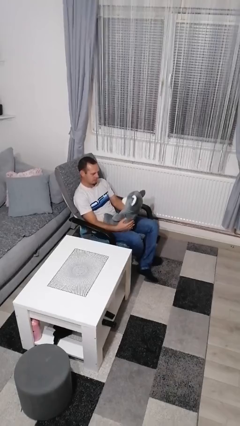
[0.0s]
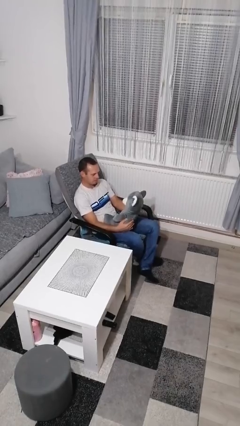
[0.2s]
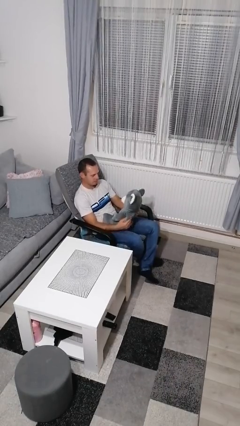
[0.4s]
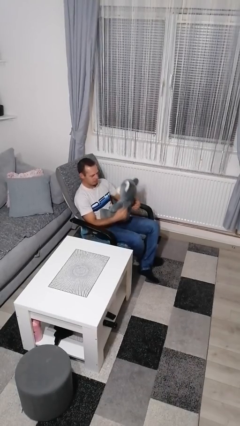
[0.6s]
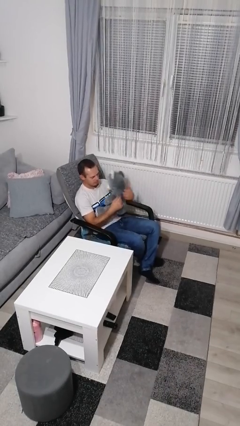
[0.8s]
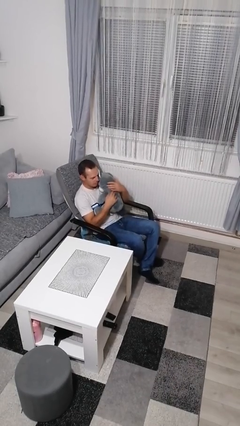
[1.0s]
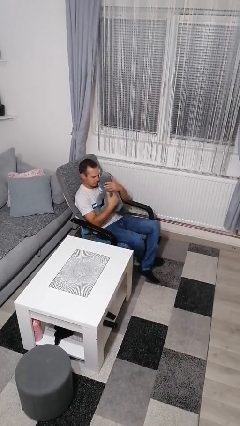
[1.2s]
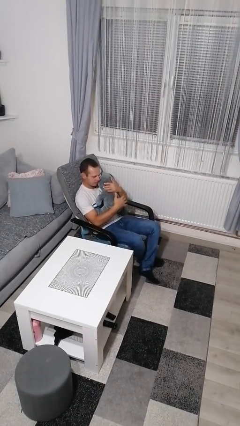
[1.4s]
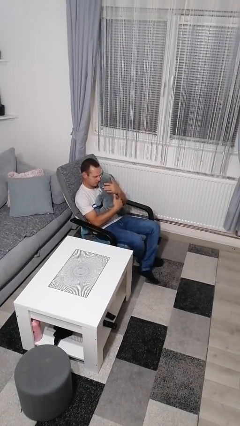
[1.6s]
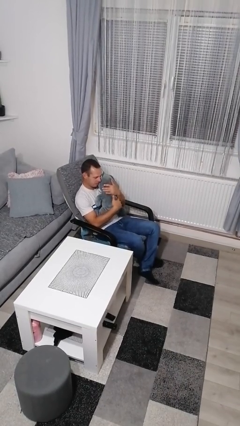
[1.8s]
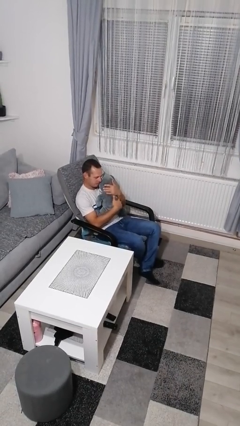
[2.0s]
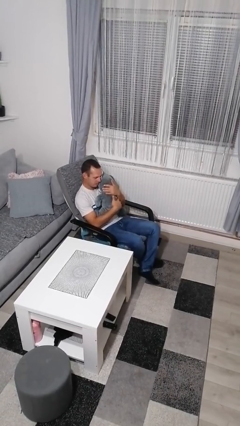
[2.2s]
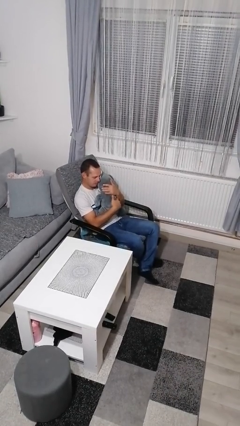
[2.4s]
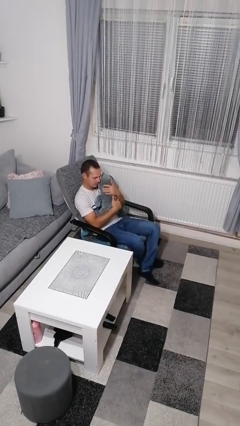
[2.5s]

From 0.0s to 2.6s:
person hugs stuffed animal

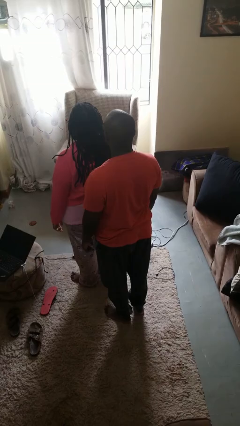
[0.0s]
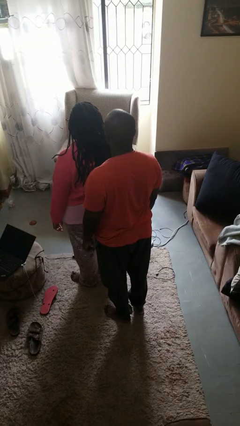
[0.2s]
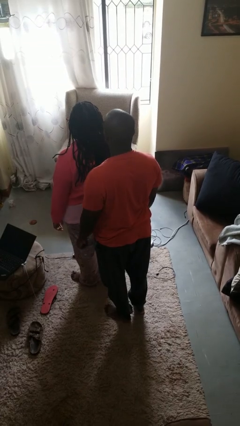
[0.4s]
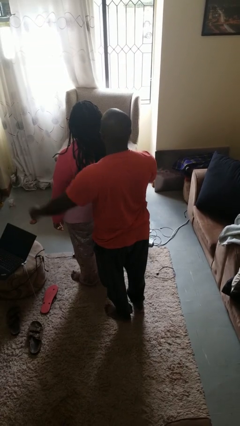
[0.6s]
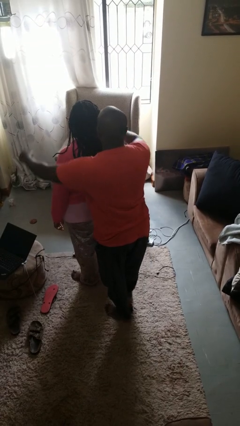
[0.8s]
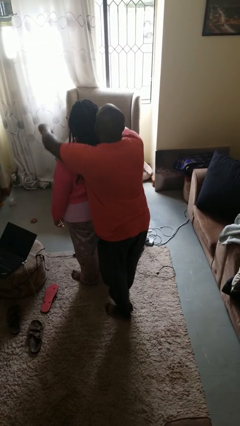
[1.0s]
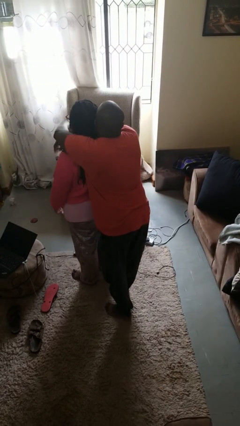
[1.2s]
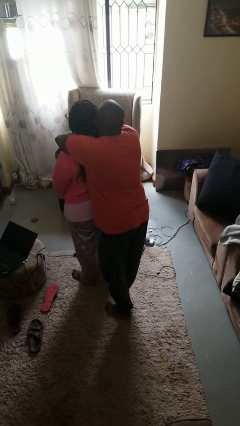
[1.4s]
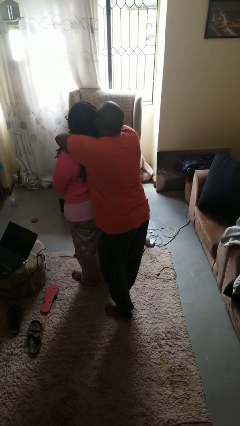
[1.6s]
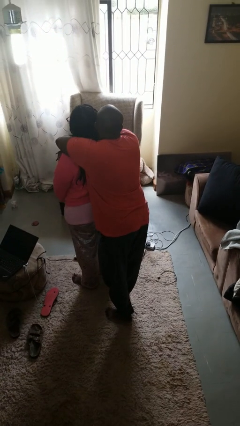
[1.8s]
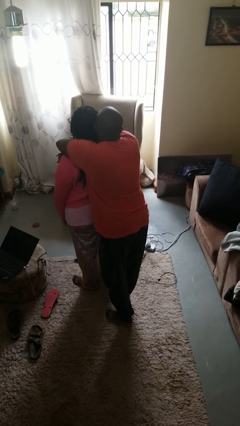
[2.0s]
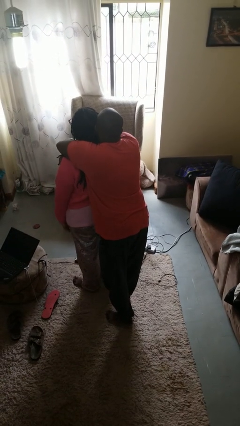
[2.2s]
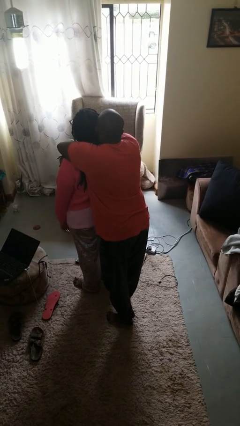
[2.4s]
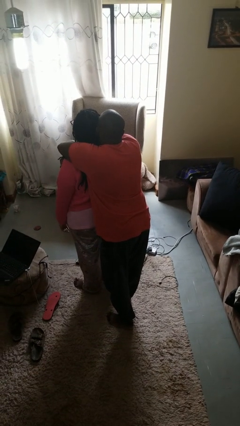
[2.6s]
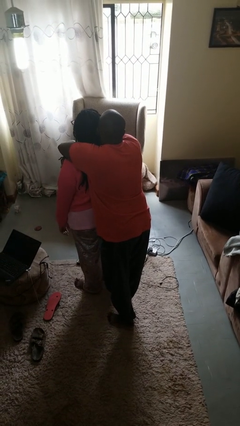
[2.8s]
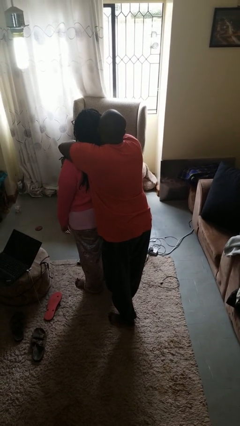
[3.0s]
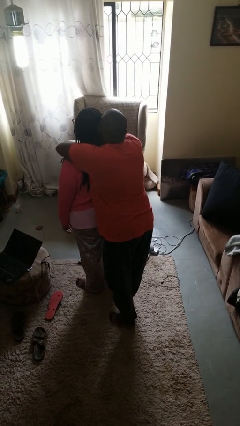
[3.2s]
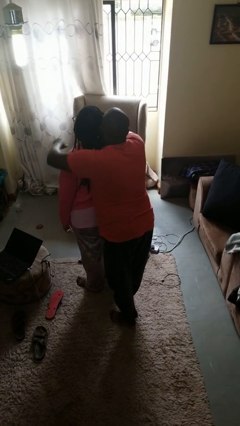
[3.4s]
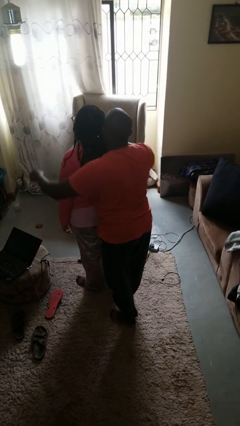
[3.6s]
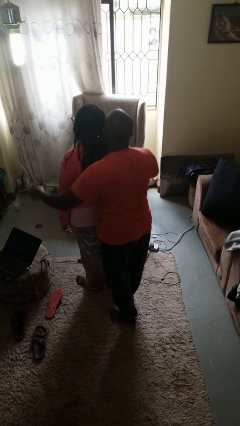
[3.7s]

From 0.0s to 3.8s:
person hugs person from behind

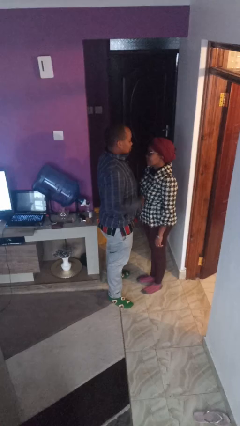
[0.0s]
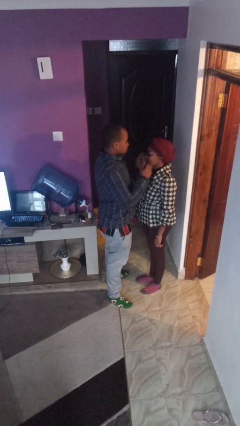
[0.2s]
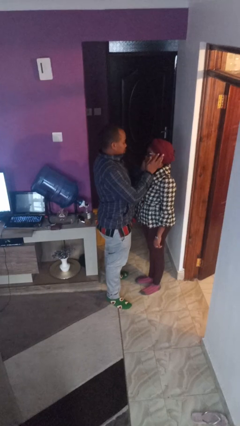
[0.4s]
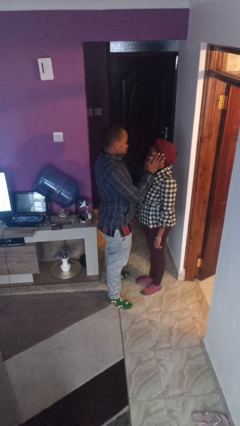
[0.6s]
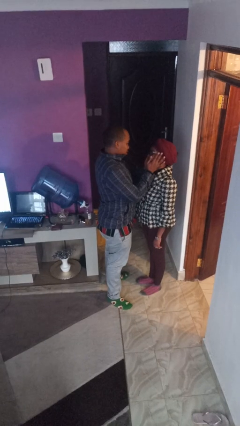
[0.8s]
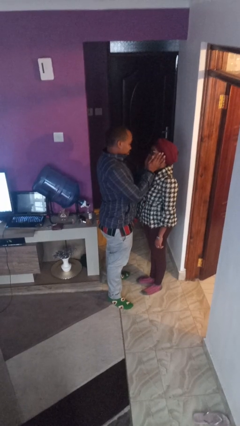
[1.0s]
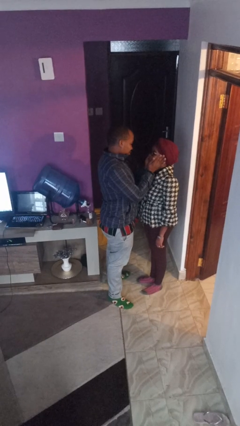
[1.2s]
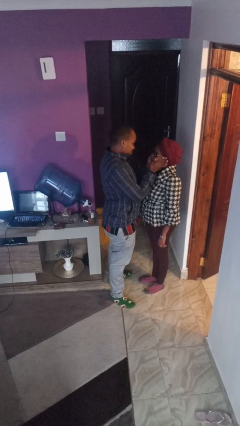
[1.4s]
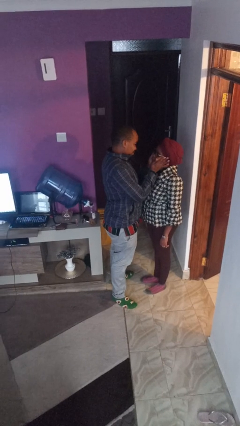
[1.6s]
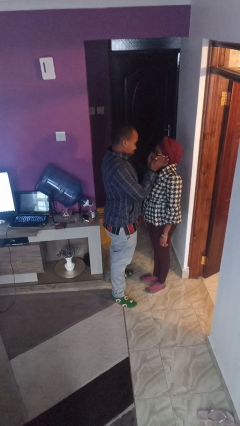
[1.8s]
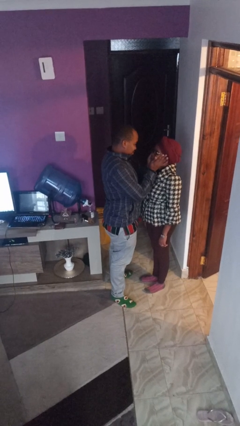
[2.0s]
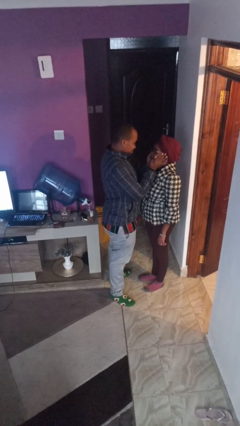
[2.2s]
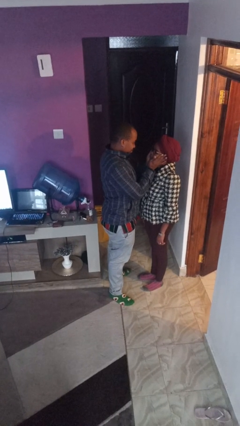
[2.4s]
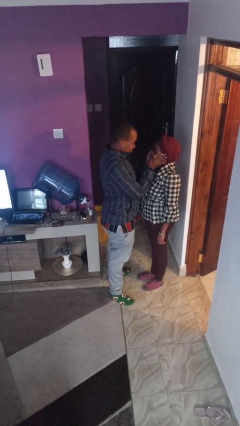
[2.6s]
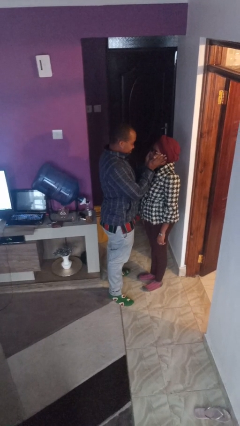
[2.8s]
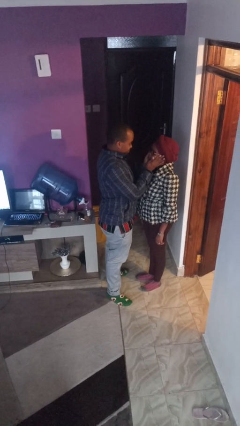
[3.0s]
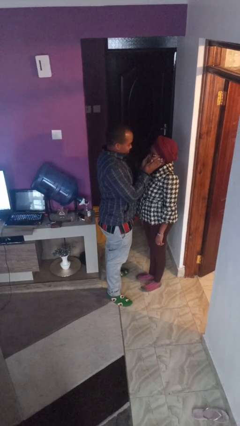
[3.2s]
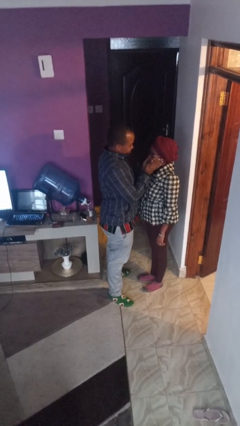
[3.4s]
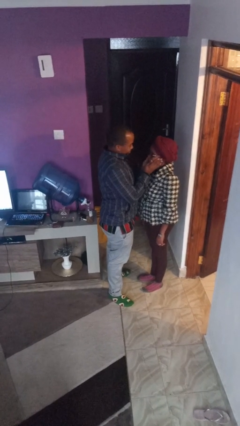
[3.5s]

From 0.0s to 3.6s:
person touches face of person

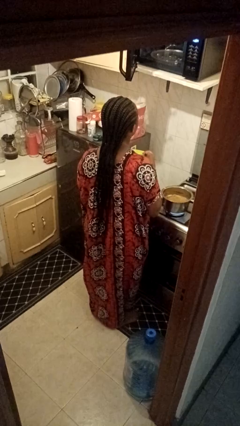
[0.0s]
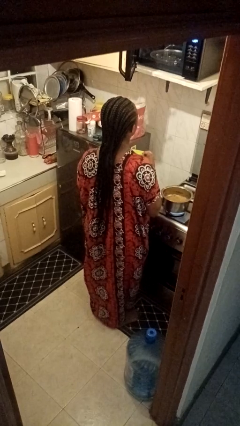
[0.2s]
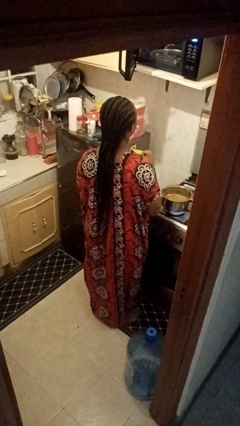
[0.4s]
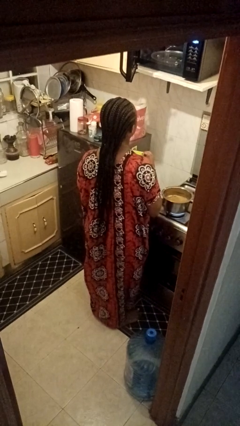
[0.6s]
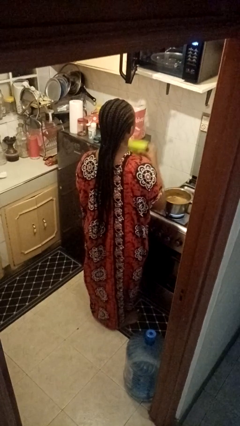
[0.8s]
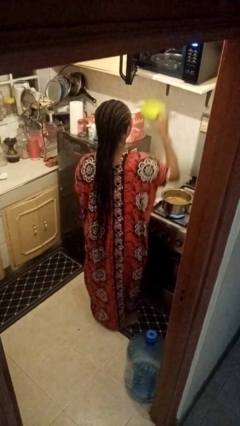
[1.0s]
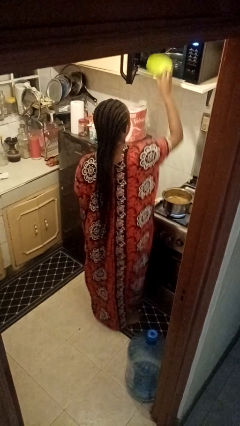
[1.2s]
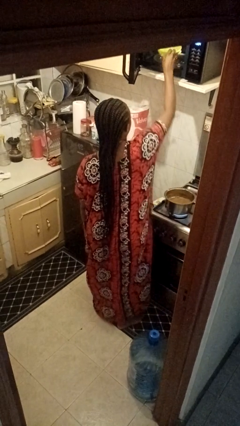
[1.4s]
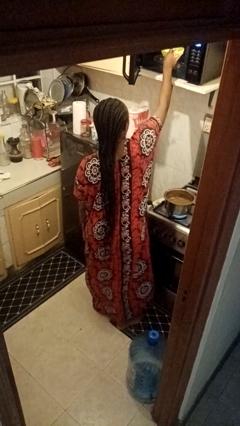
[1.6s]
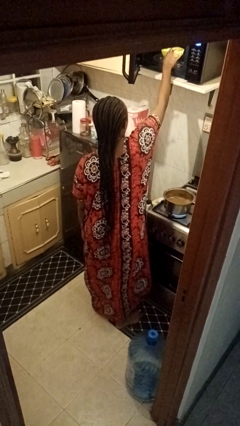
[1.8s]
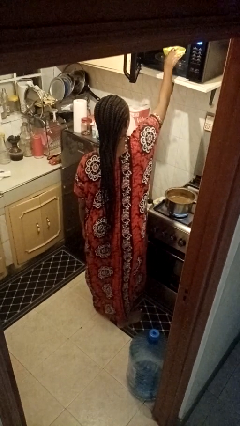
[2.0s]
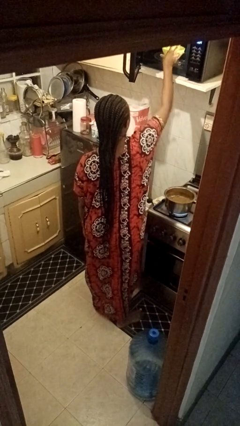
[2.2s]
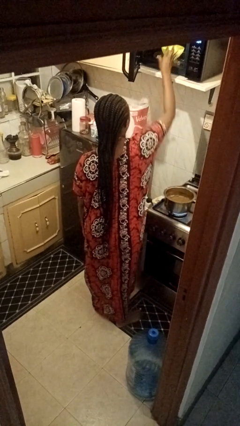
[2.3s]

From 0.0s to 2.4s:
person puts object into microwave

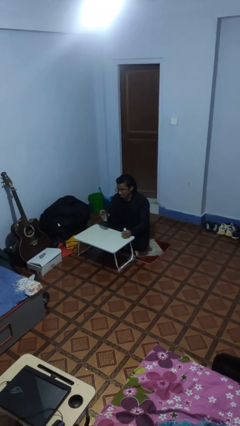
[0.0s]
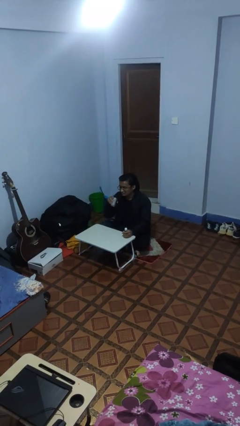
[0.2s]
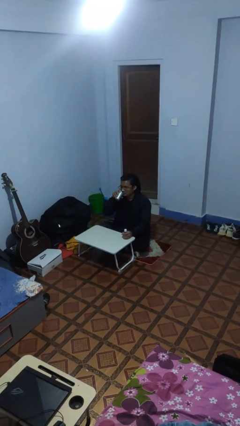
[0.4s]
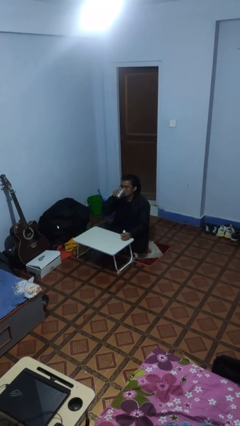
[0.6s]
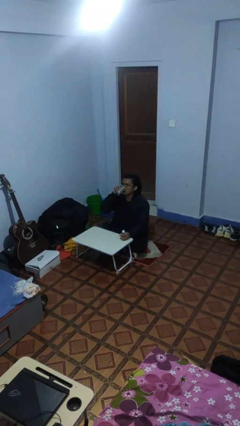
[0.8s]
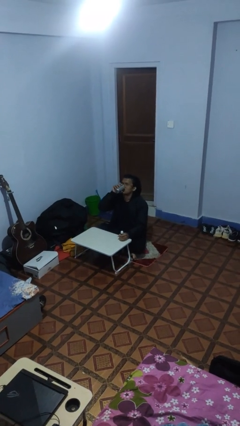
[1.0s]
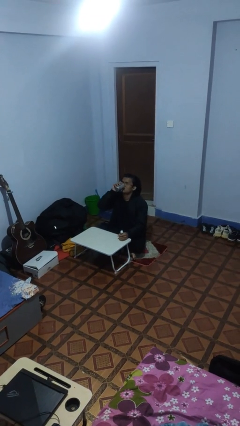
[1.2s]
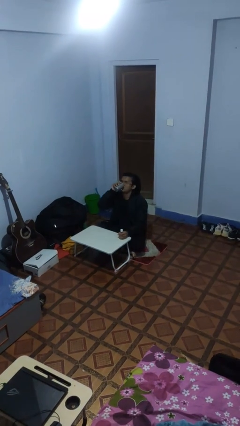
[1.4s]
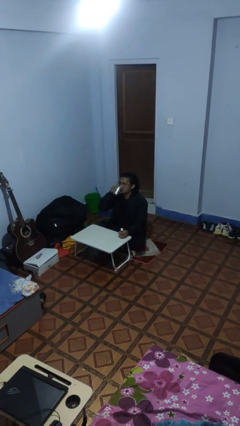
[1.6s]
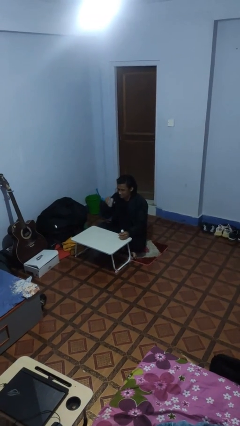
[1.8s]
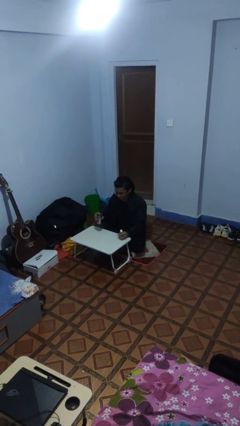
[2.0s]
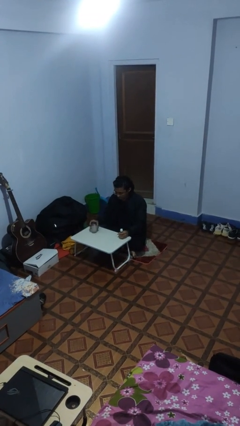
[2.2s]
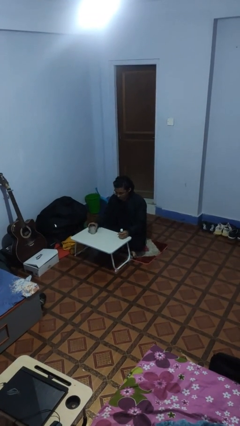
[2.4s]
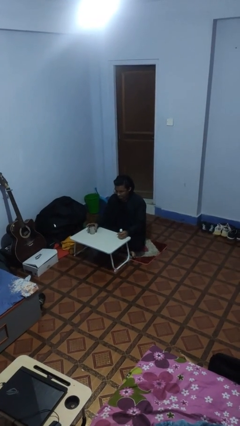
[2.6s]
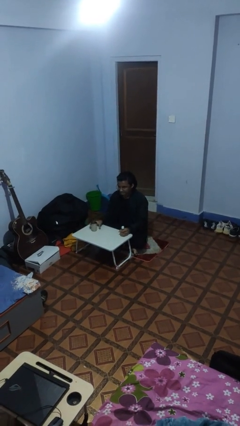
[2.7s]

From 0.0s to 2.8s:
person drinks from cup

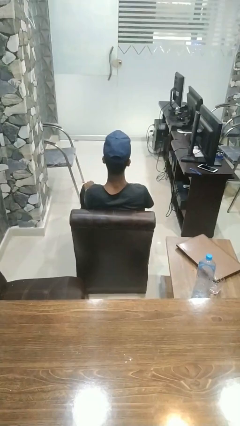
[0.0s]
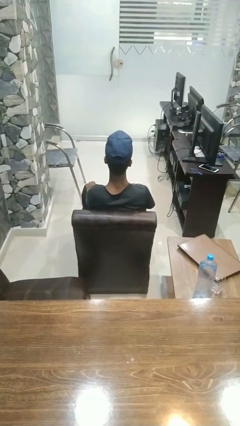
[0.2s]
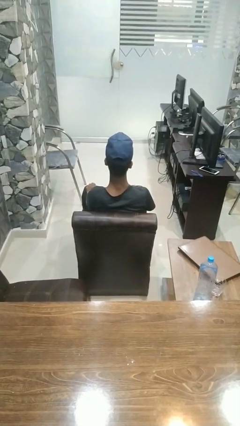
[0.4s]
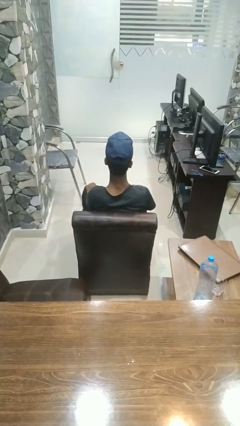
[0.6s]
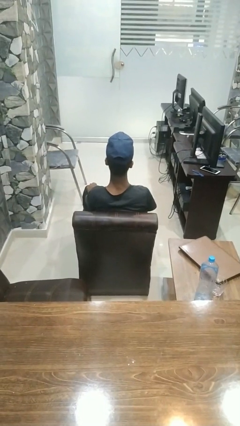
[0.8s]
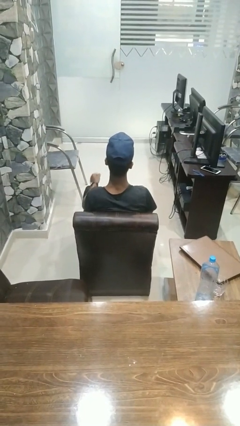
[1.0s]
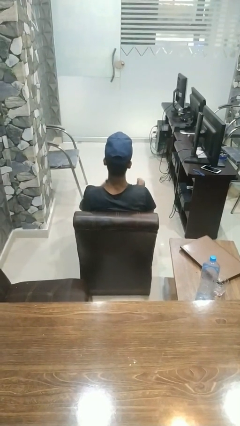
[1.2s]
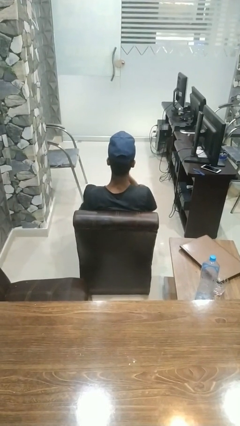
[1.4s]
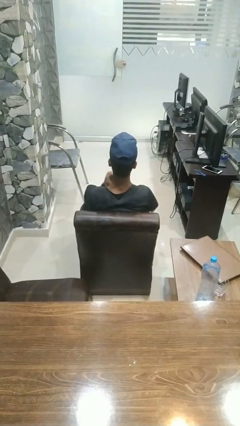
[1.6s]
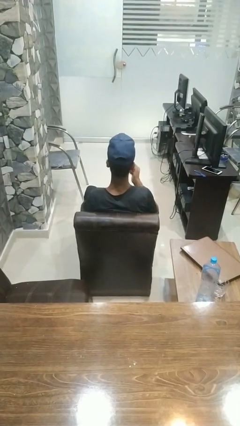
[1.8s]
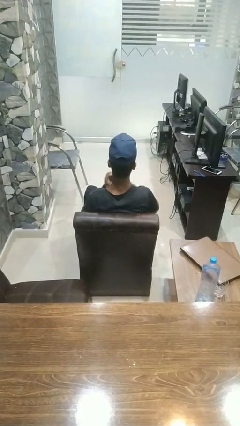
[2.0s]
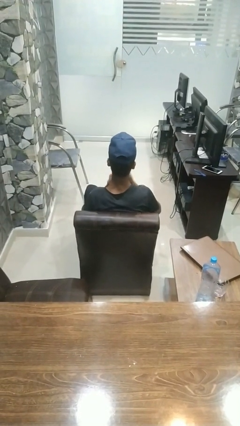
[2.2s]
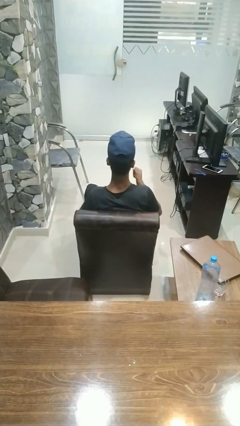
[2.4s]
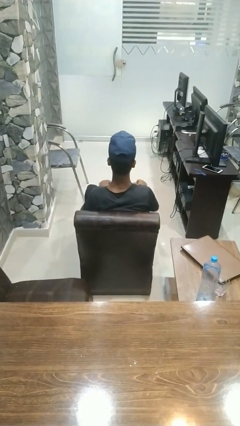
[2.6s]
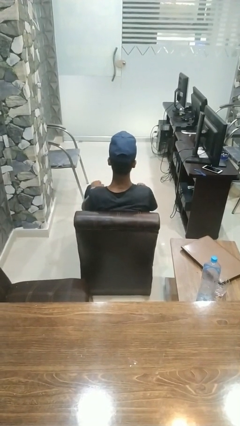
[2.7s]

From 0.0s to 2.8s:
person drums on chest
